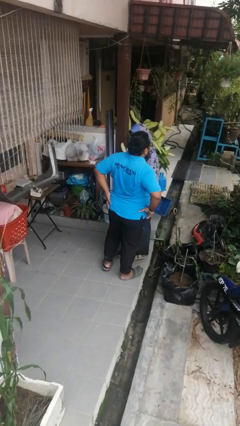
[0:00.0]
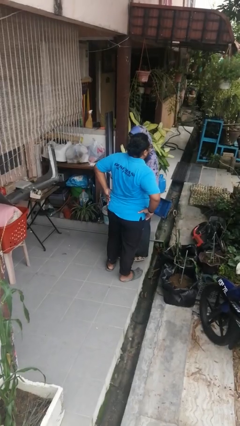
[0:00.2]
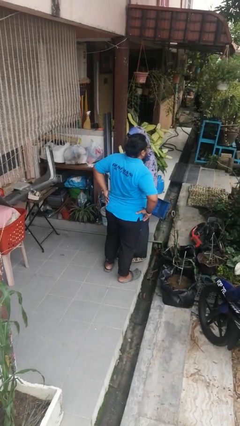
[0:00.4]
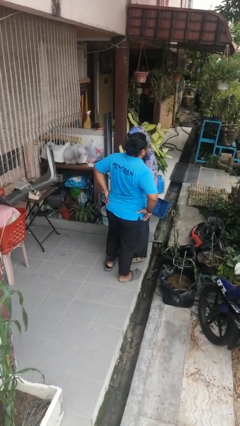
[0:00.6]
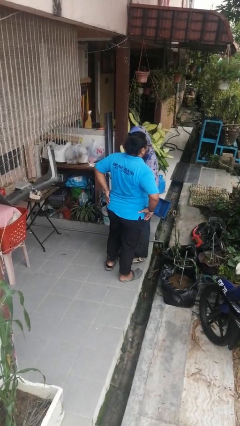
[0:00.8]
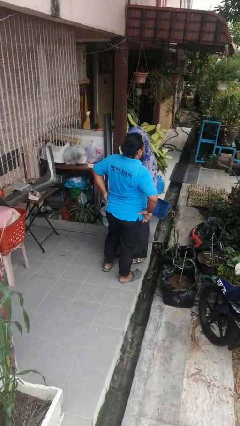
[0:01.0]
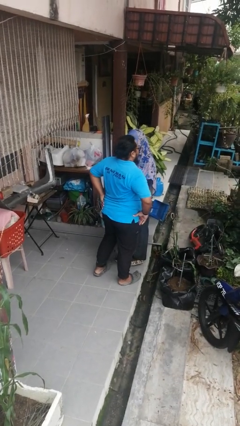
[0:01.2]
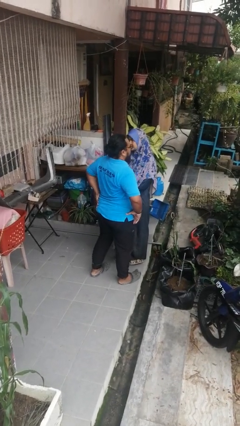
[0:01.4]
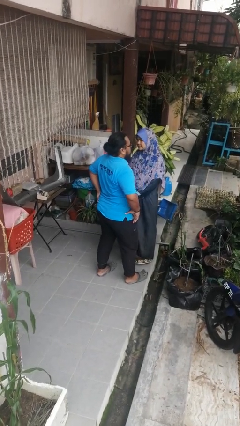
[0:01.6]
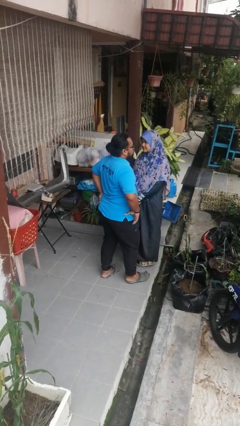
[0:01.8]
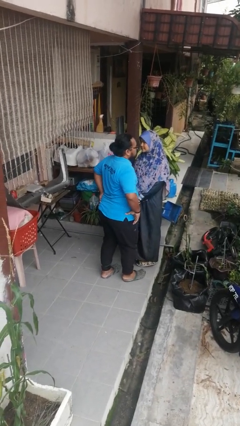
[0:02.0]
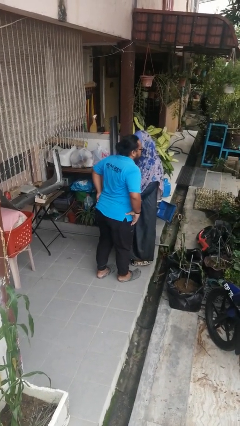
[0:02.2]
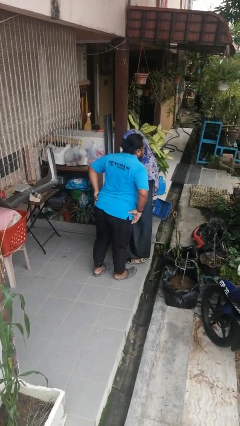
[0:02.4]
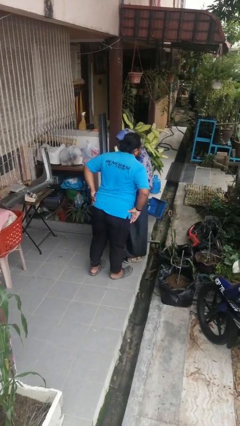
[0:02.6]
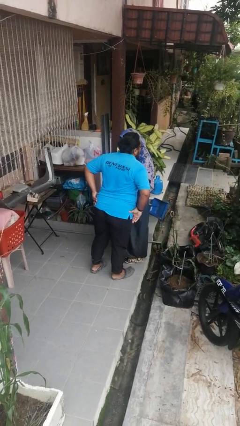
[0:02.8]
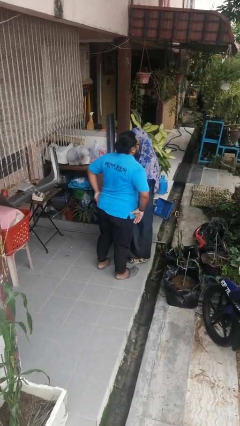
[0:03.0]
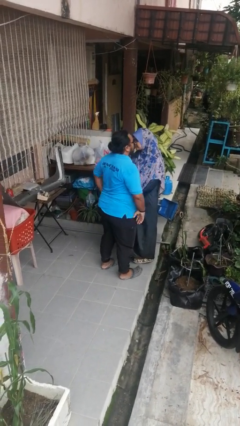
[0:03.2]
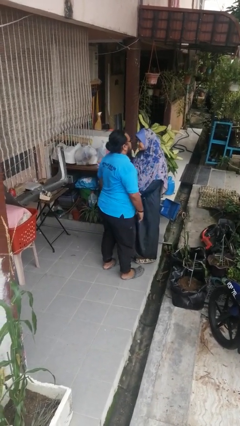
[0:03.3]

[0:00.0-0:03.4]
person kisses cheek of person

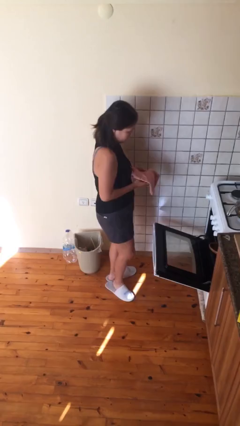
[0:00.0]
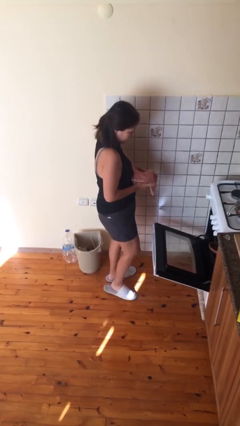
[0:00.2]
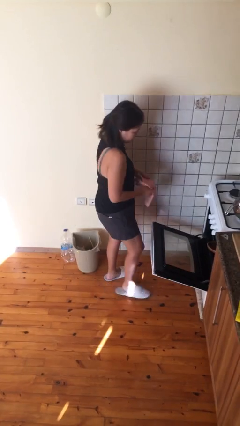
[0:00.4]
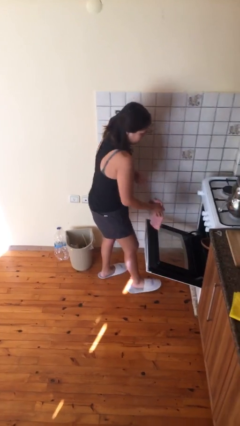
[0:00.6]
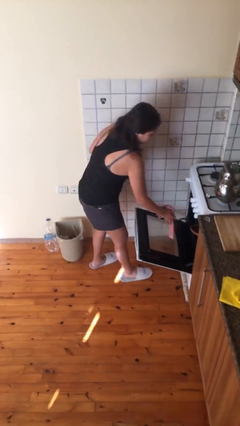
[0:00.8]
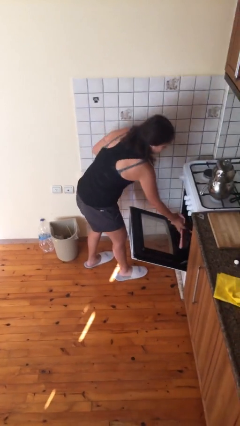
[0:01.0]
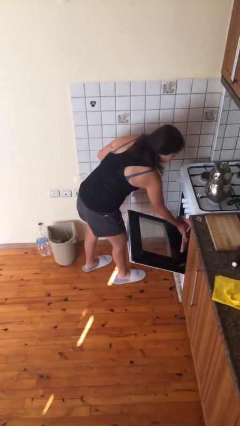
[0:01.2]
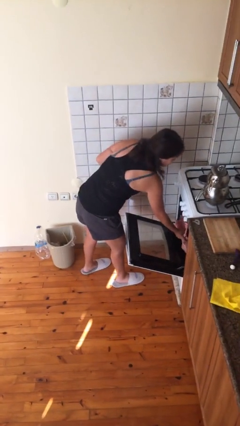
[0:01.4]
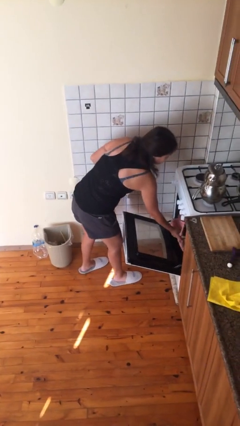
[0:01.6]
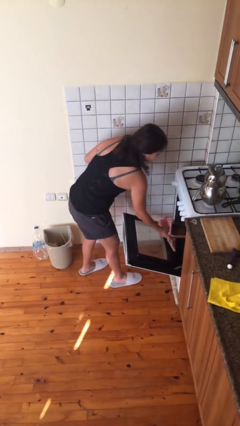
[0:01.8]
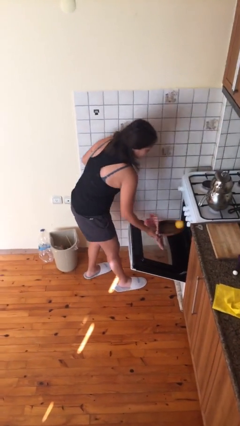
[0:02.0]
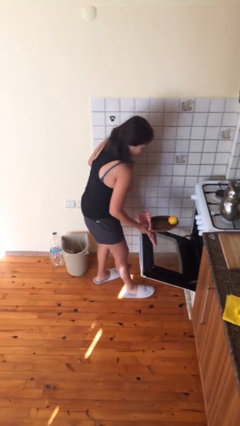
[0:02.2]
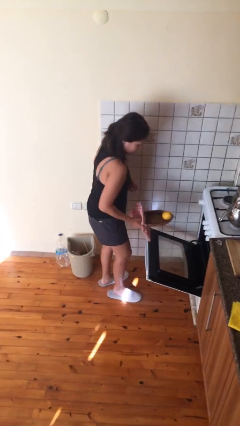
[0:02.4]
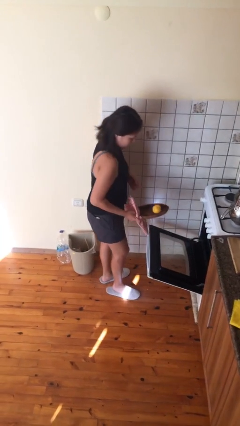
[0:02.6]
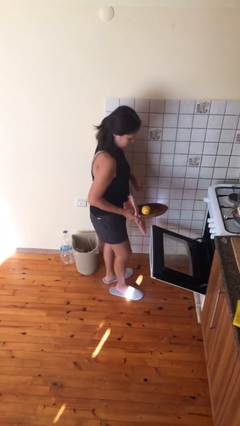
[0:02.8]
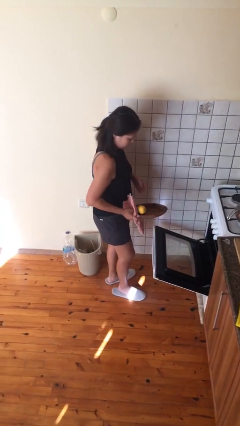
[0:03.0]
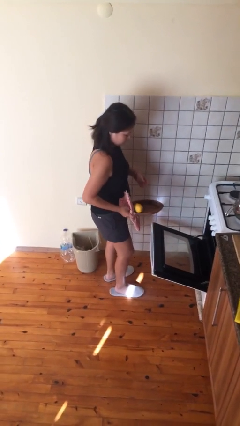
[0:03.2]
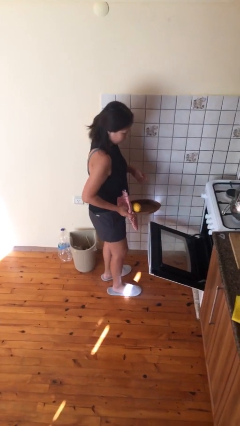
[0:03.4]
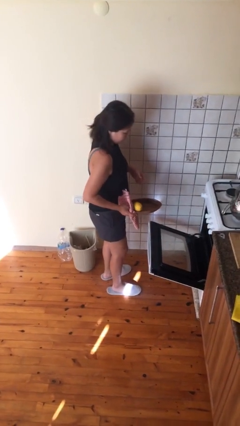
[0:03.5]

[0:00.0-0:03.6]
person takes object from oven

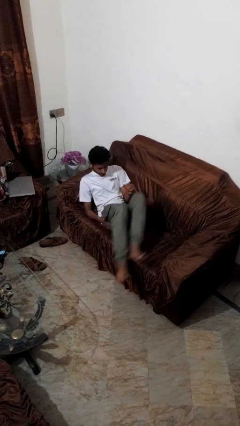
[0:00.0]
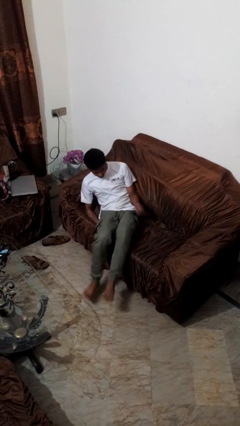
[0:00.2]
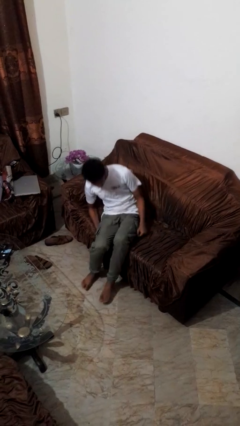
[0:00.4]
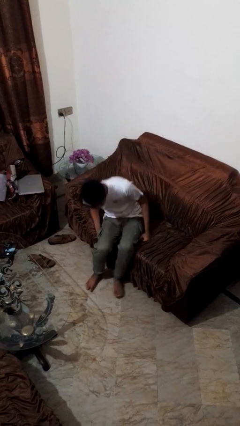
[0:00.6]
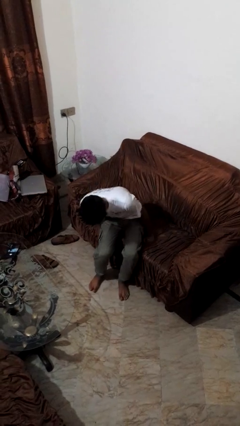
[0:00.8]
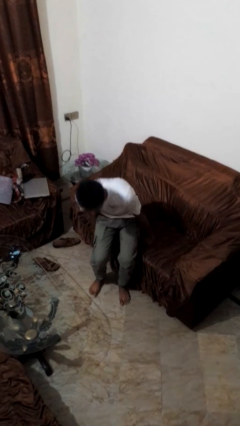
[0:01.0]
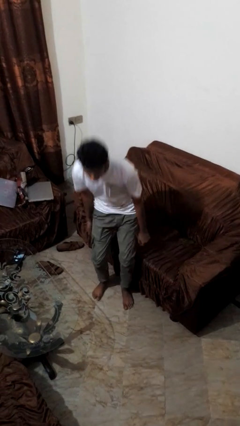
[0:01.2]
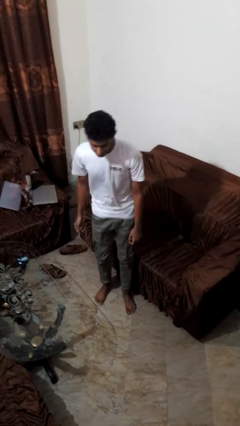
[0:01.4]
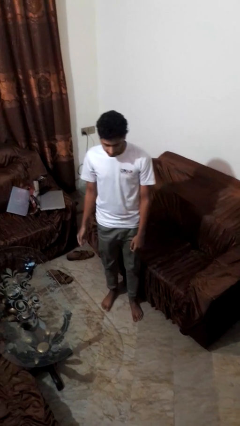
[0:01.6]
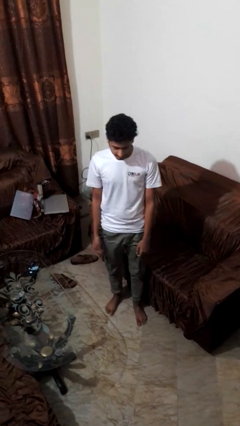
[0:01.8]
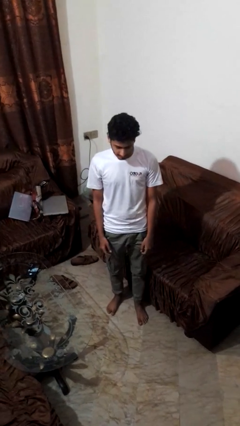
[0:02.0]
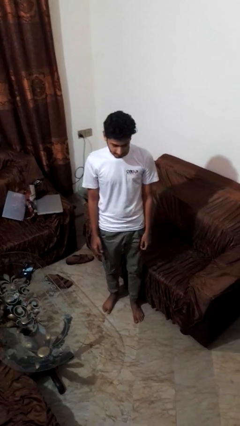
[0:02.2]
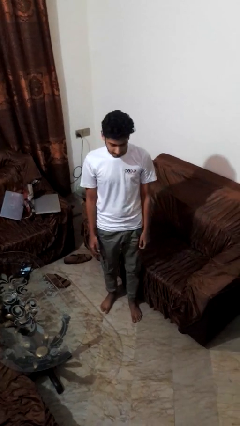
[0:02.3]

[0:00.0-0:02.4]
person stands up

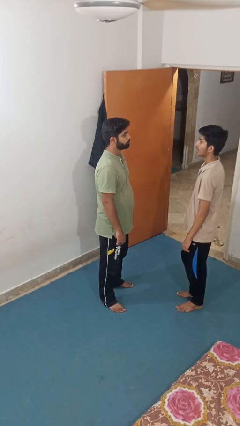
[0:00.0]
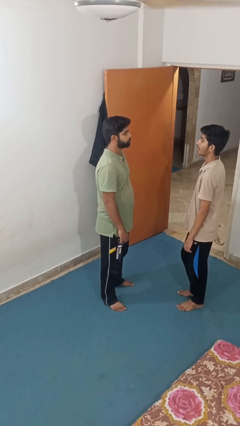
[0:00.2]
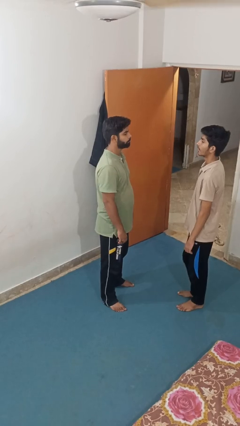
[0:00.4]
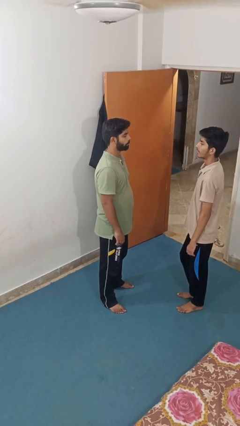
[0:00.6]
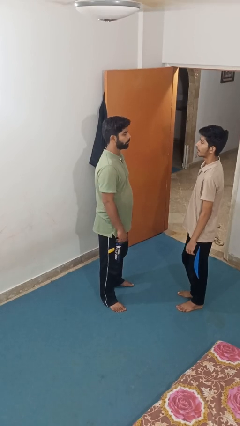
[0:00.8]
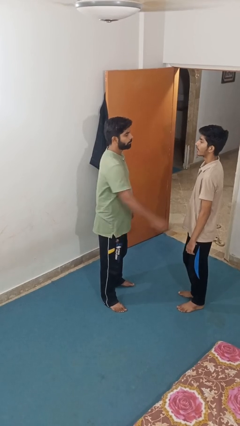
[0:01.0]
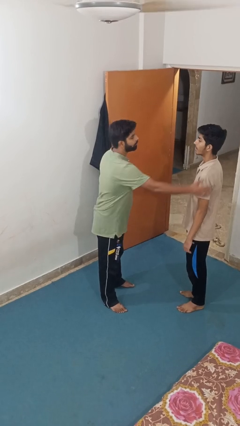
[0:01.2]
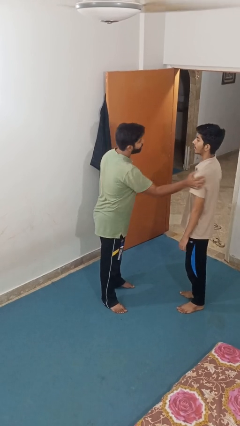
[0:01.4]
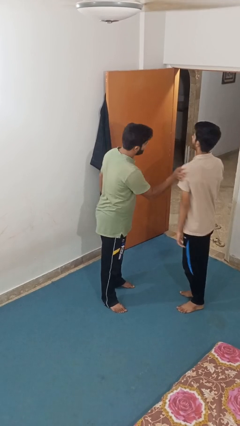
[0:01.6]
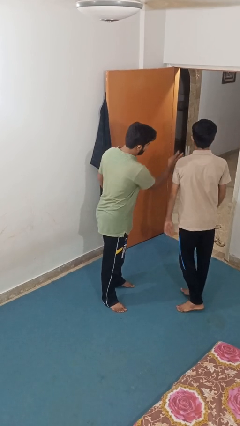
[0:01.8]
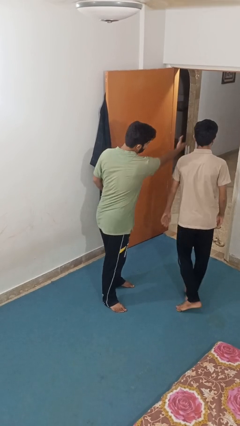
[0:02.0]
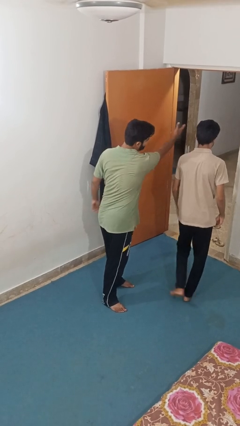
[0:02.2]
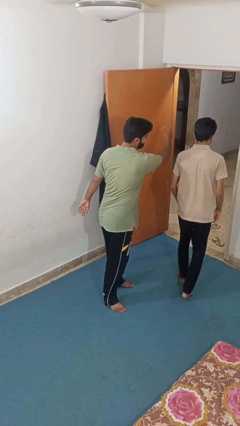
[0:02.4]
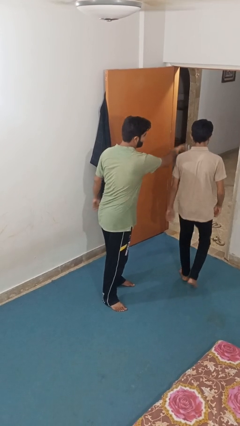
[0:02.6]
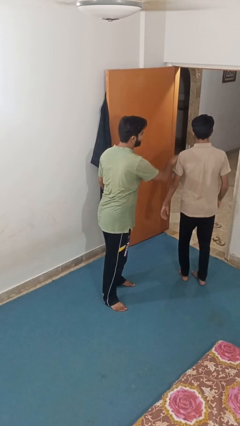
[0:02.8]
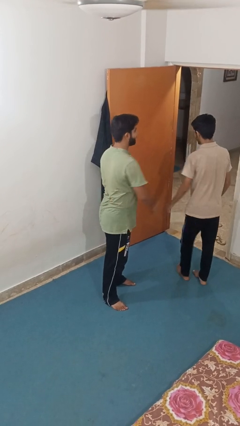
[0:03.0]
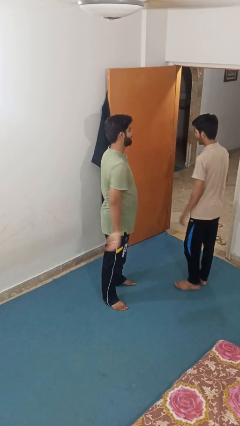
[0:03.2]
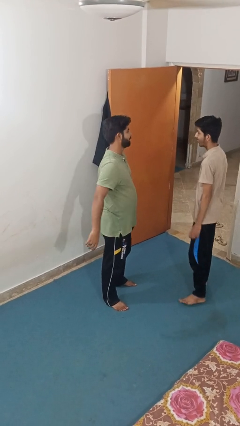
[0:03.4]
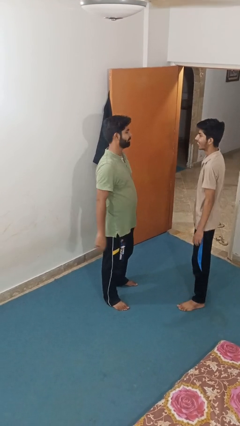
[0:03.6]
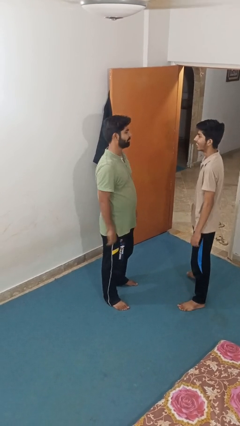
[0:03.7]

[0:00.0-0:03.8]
person shoves person

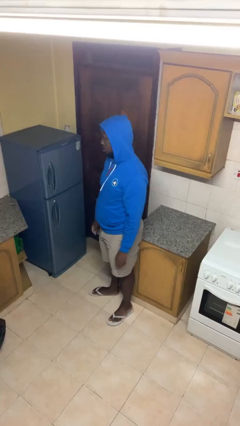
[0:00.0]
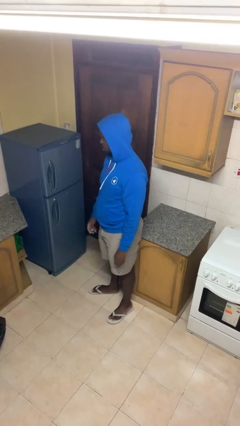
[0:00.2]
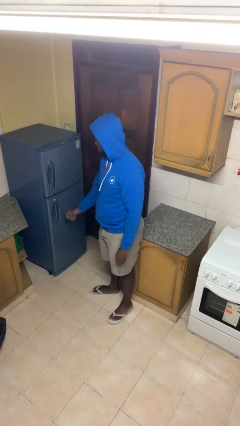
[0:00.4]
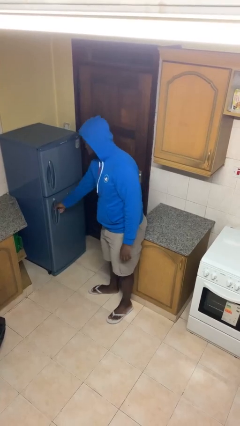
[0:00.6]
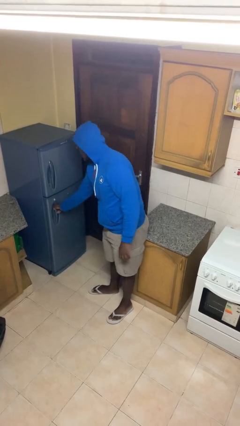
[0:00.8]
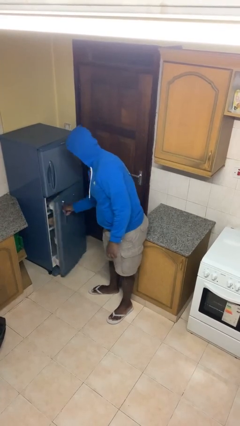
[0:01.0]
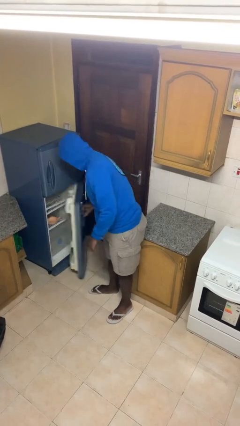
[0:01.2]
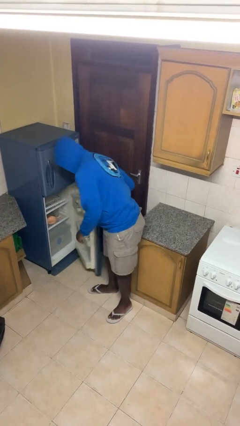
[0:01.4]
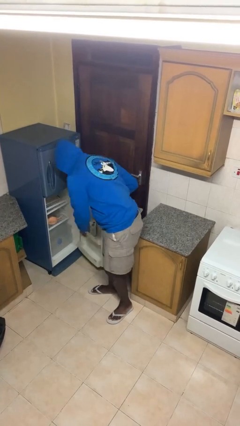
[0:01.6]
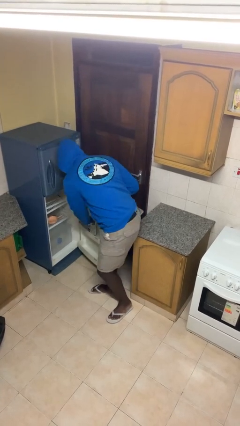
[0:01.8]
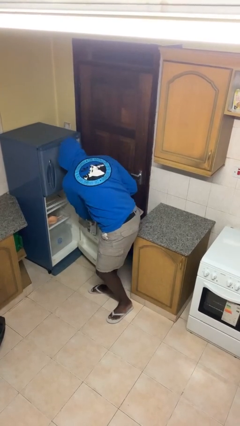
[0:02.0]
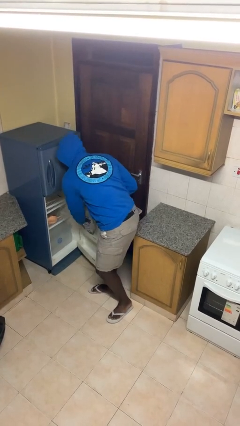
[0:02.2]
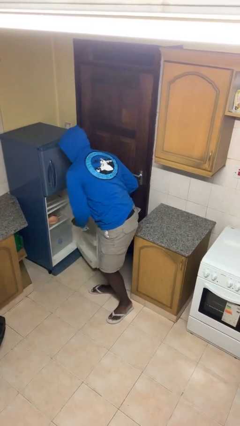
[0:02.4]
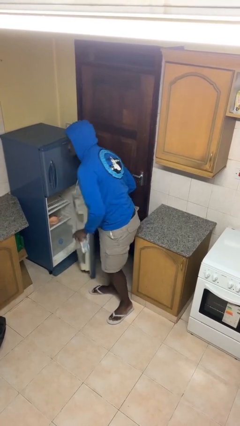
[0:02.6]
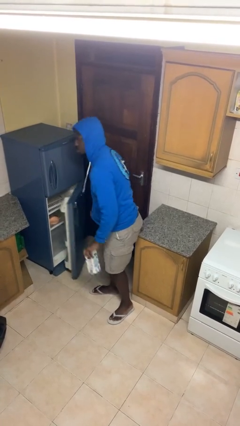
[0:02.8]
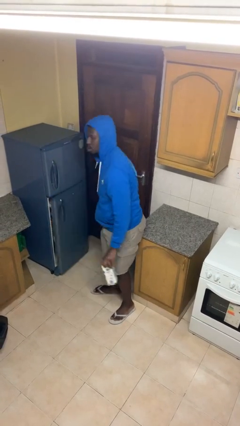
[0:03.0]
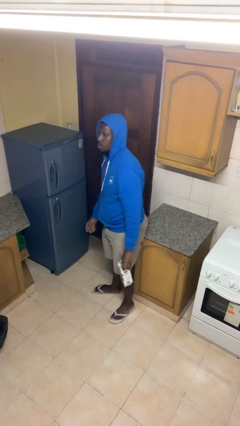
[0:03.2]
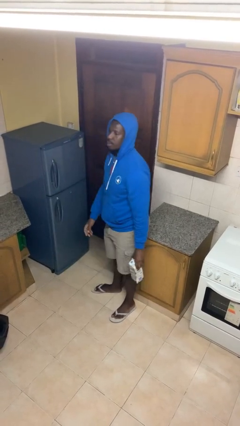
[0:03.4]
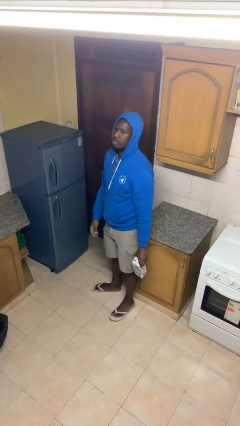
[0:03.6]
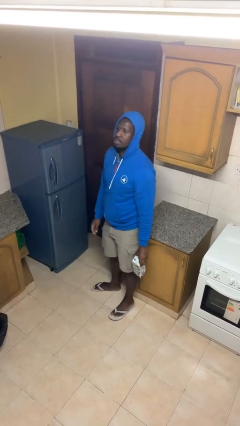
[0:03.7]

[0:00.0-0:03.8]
person takes object from refrigerator

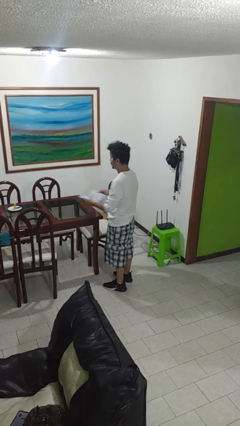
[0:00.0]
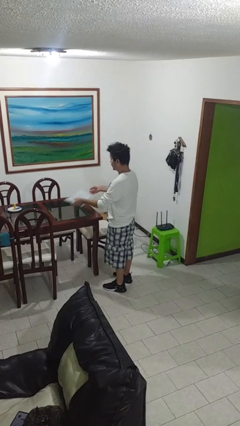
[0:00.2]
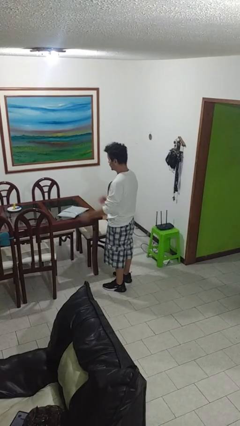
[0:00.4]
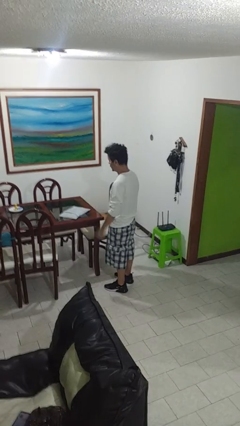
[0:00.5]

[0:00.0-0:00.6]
person throws object on table
